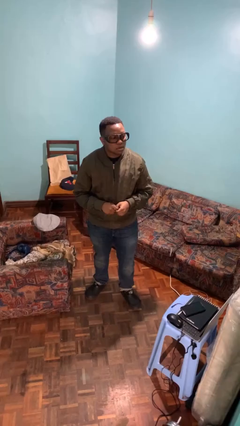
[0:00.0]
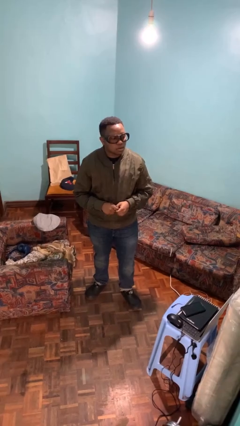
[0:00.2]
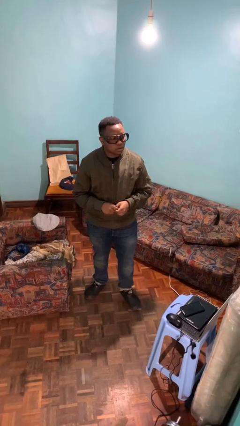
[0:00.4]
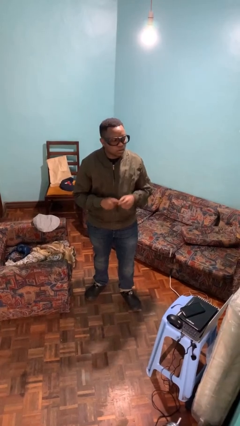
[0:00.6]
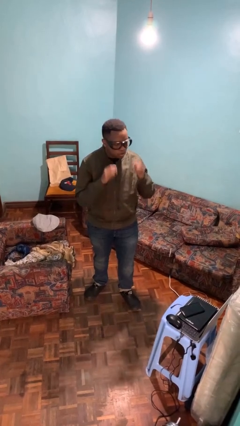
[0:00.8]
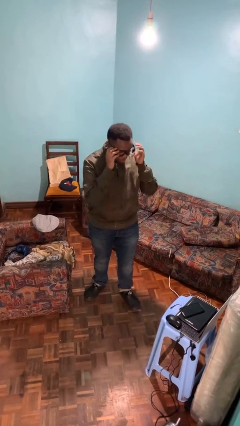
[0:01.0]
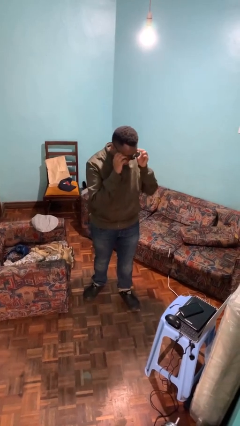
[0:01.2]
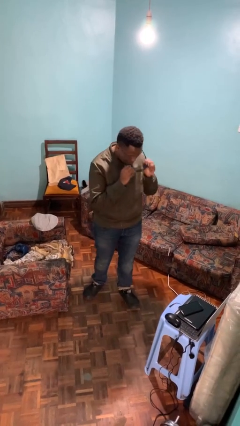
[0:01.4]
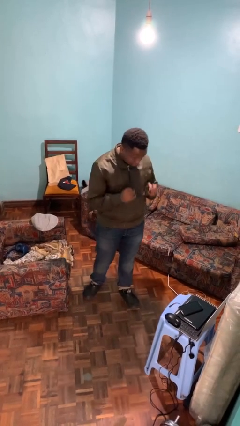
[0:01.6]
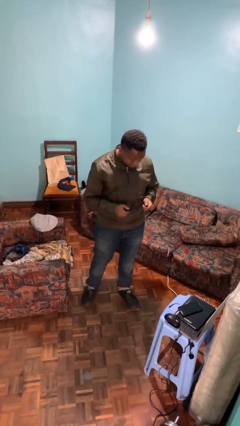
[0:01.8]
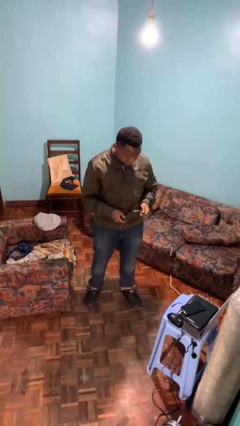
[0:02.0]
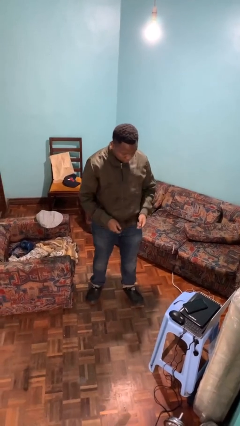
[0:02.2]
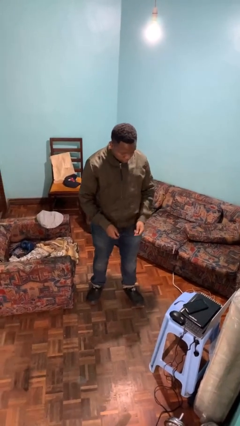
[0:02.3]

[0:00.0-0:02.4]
person takes off glasses

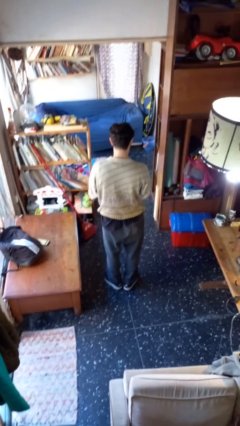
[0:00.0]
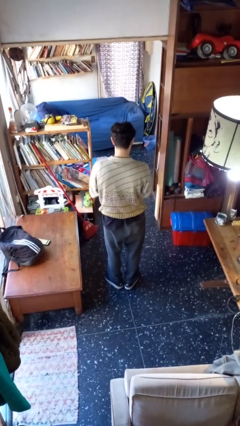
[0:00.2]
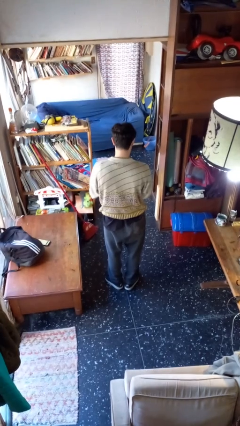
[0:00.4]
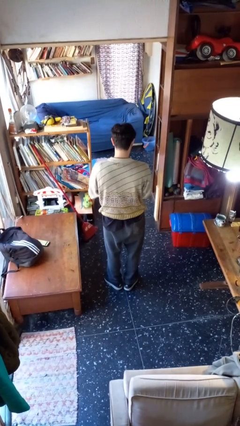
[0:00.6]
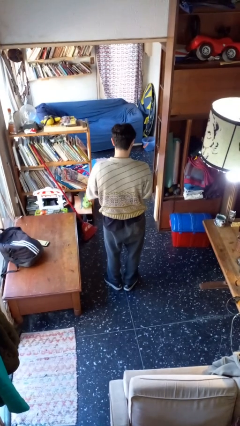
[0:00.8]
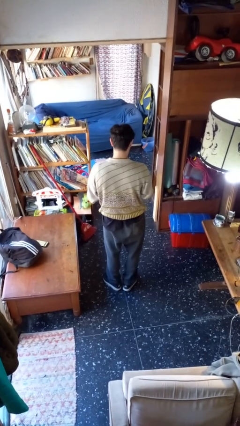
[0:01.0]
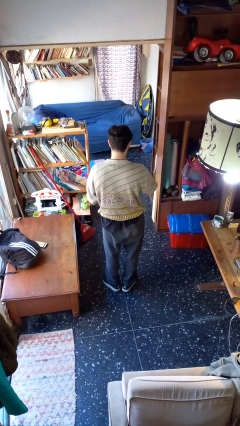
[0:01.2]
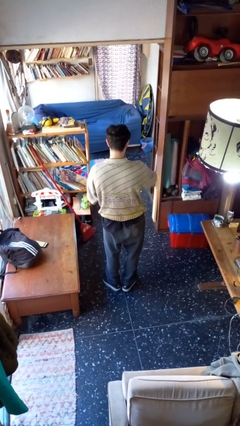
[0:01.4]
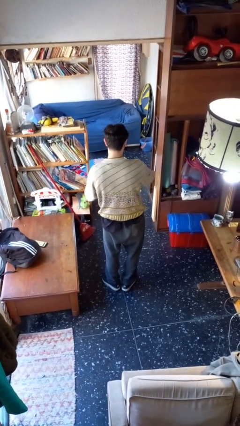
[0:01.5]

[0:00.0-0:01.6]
person takes off wristwatch

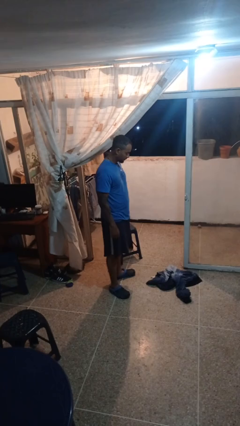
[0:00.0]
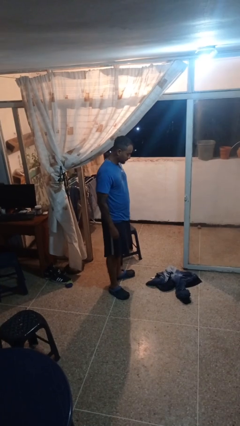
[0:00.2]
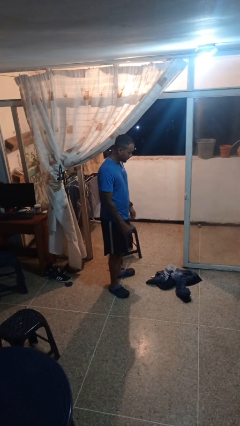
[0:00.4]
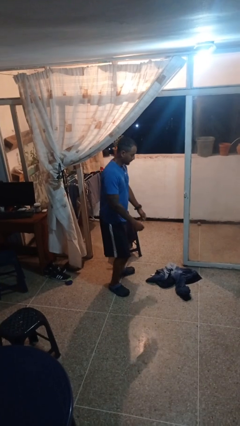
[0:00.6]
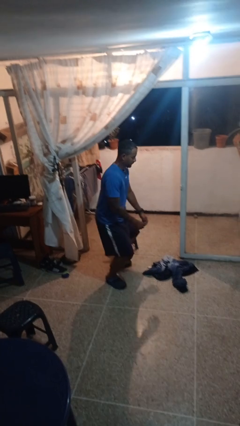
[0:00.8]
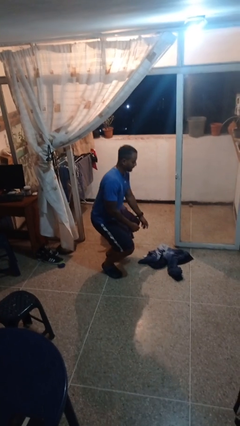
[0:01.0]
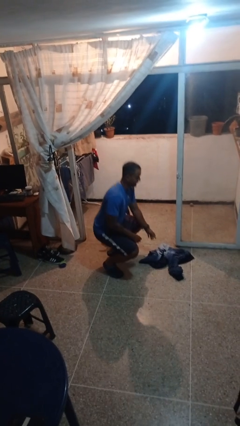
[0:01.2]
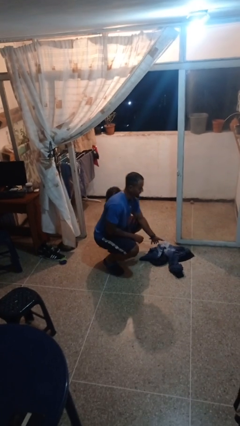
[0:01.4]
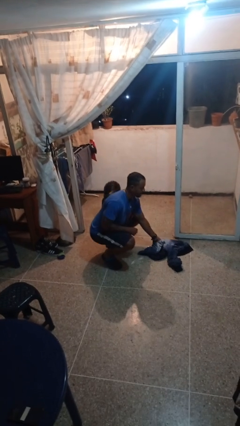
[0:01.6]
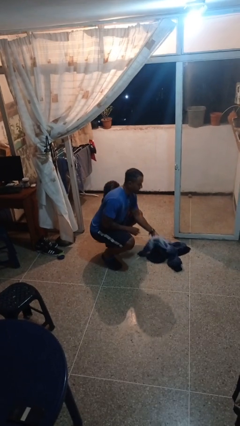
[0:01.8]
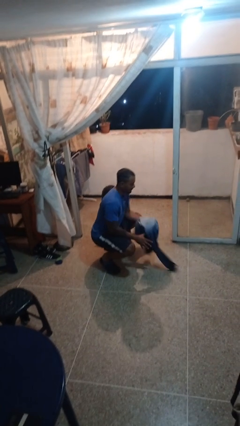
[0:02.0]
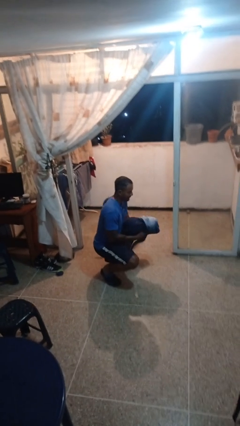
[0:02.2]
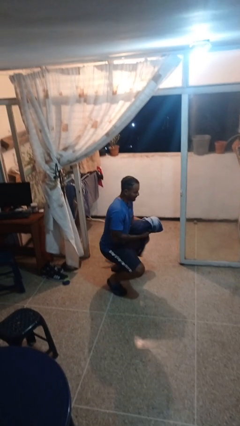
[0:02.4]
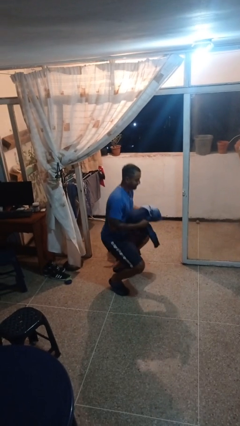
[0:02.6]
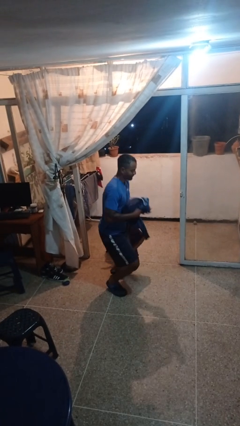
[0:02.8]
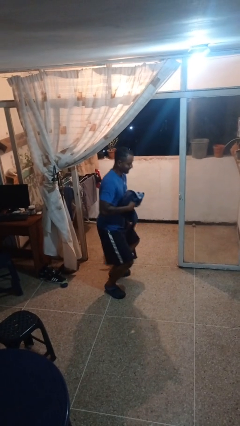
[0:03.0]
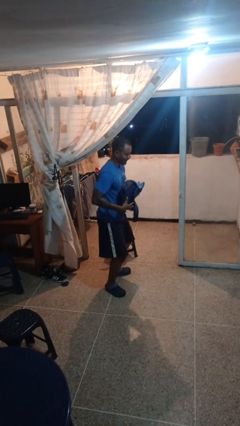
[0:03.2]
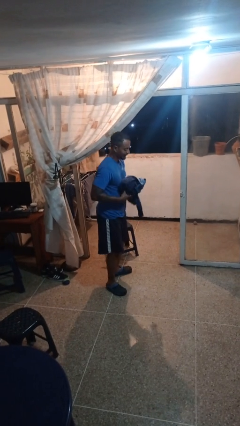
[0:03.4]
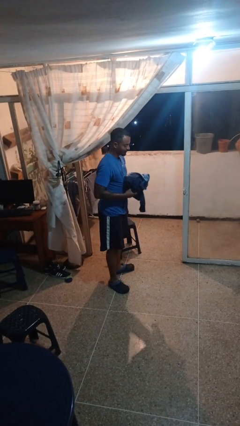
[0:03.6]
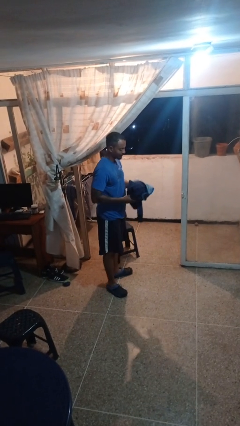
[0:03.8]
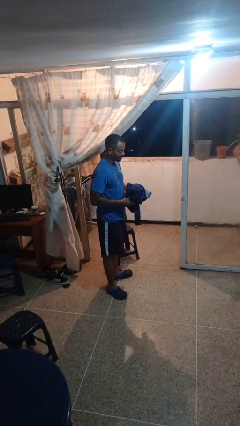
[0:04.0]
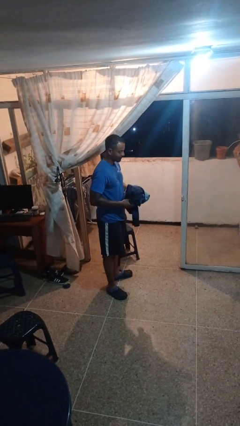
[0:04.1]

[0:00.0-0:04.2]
person picks up object from floor

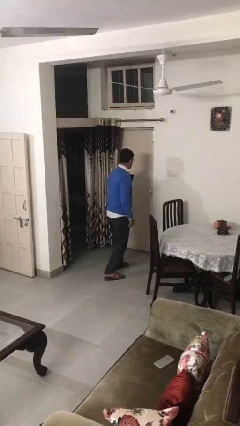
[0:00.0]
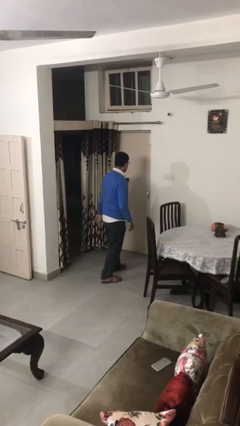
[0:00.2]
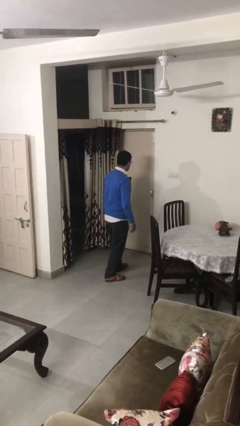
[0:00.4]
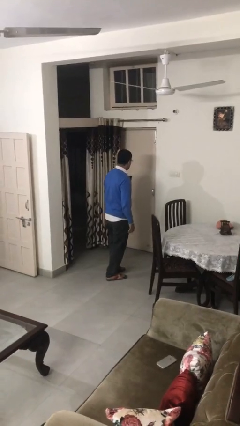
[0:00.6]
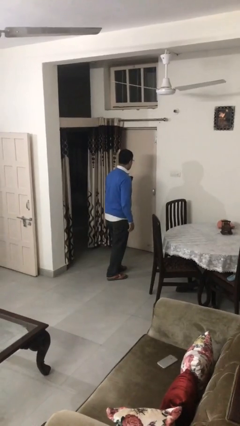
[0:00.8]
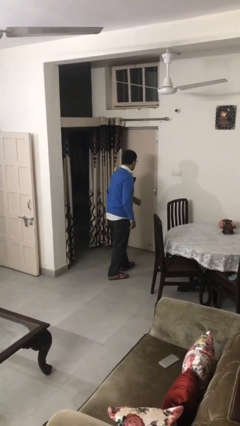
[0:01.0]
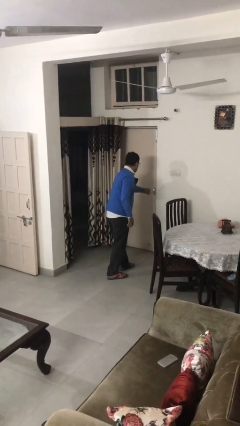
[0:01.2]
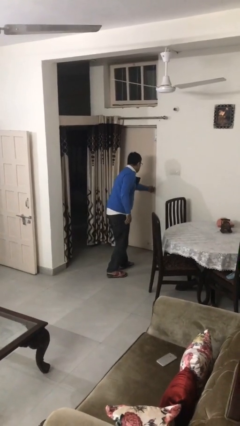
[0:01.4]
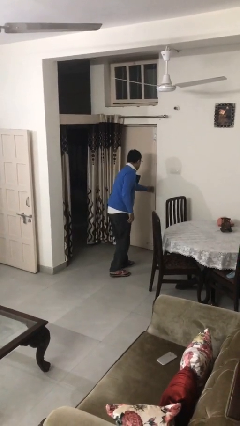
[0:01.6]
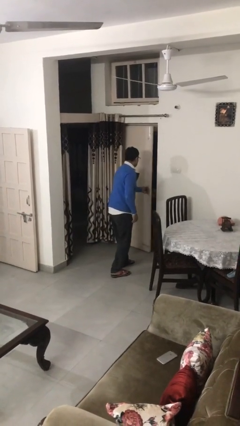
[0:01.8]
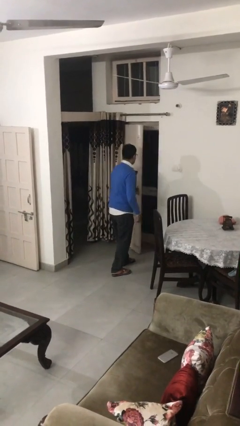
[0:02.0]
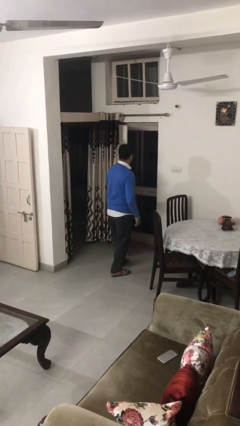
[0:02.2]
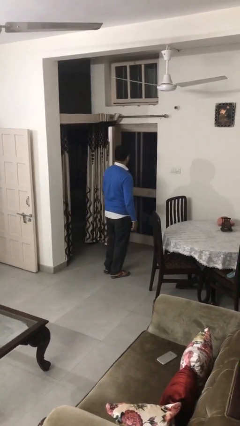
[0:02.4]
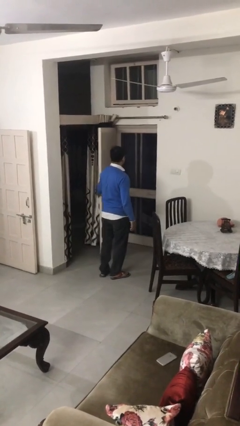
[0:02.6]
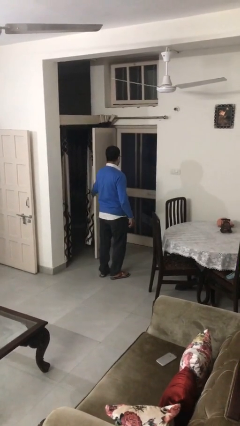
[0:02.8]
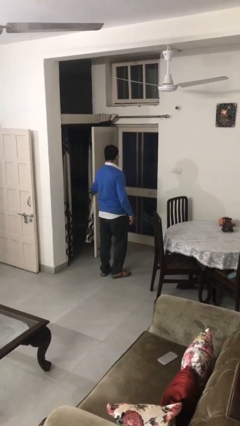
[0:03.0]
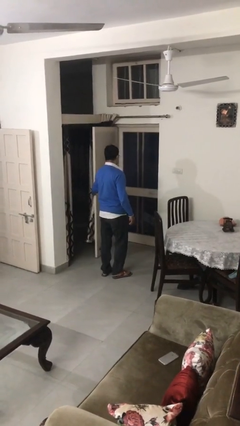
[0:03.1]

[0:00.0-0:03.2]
person opens facility door

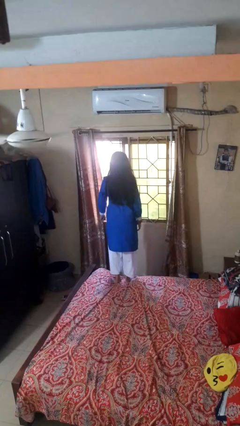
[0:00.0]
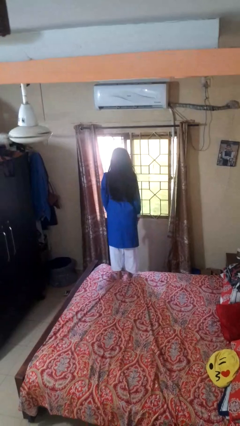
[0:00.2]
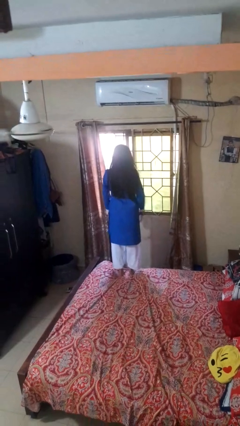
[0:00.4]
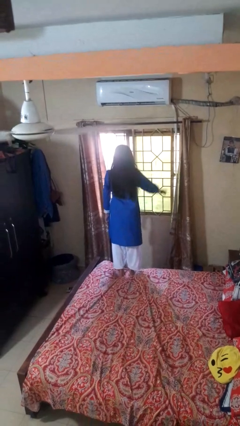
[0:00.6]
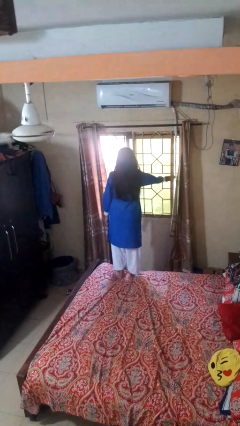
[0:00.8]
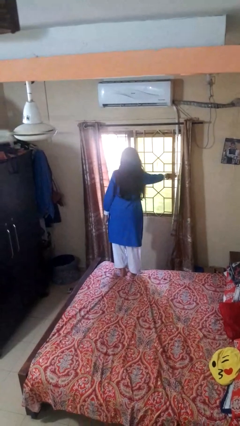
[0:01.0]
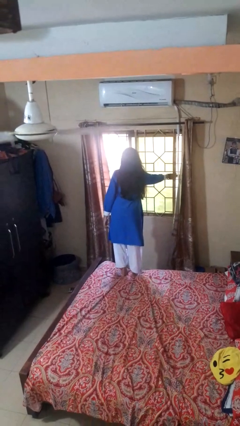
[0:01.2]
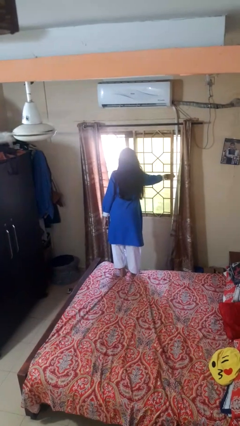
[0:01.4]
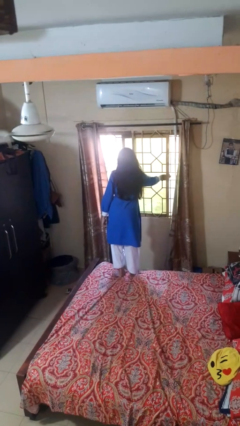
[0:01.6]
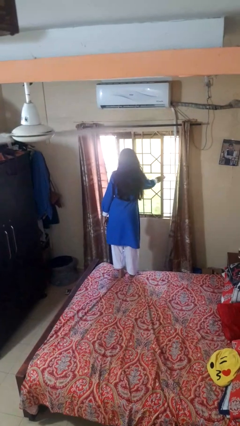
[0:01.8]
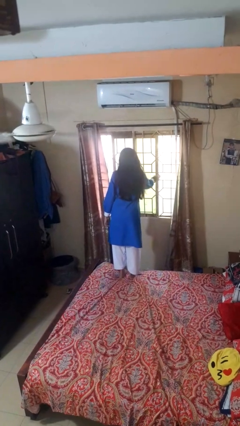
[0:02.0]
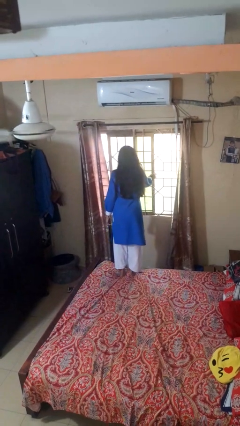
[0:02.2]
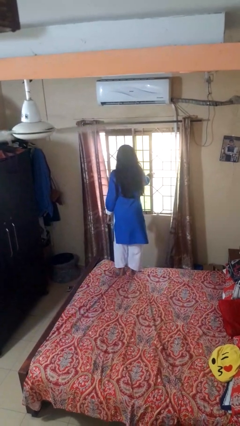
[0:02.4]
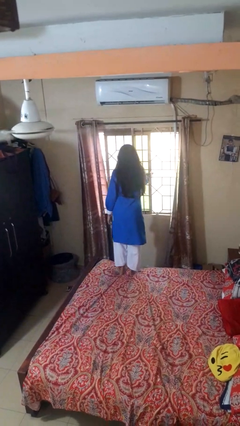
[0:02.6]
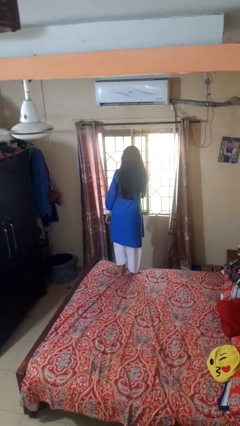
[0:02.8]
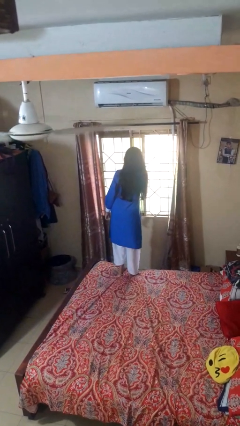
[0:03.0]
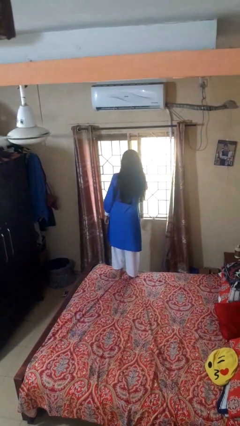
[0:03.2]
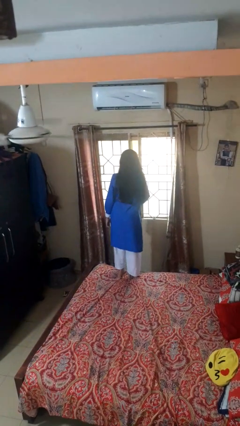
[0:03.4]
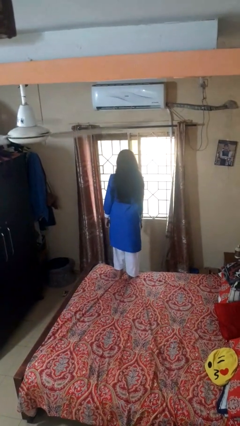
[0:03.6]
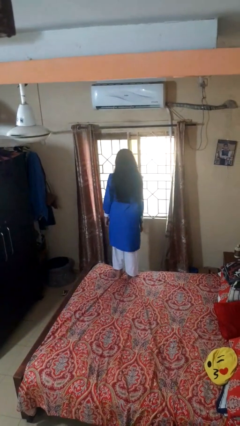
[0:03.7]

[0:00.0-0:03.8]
person closes home window

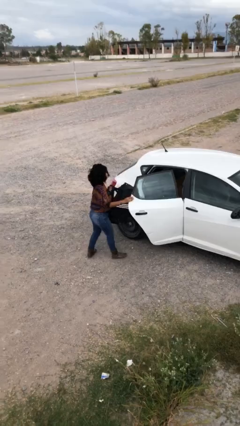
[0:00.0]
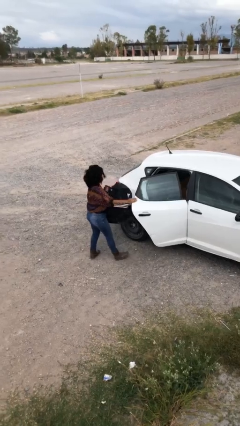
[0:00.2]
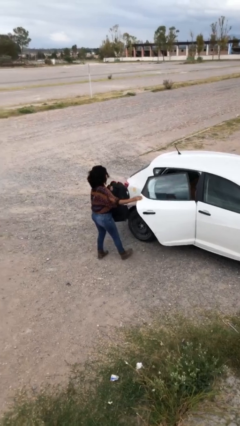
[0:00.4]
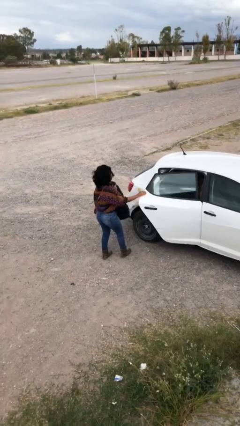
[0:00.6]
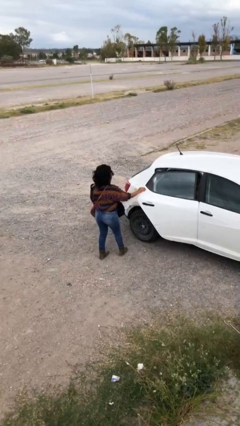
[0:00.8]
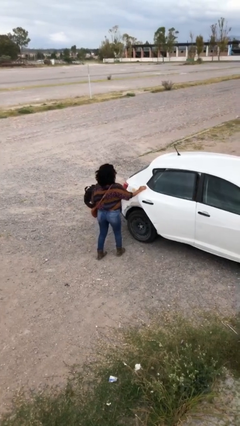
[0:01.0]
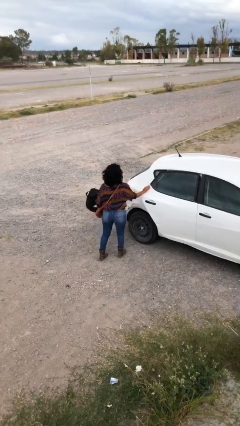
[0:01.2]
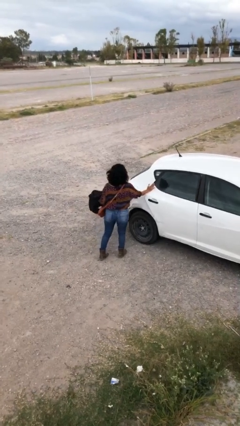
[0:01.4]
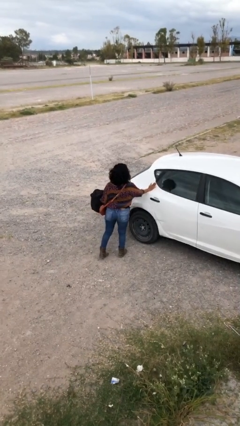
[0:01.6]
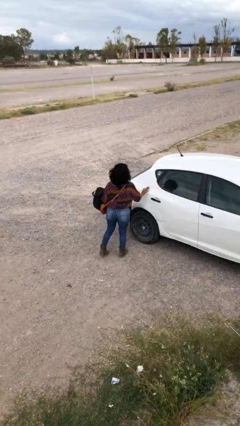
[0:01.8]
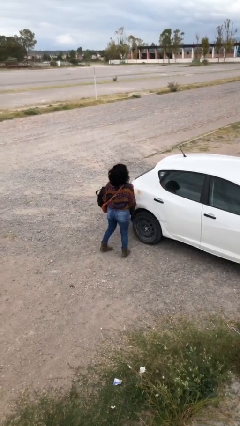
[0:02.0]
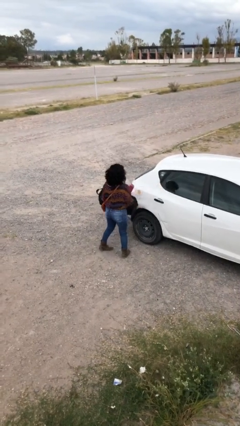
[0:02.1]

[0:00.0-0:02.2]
person closes car door
